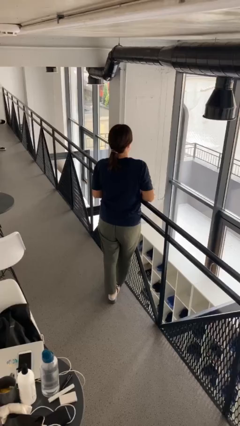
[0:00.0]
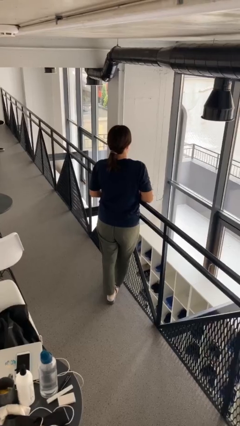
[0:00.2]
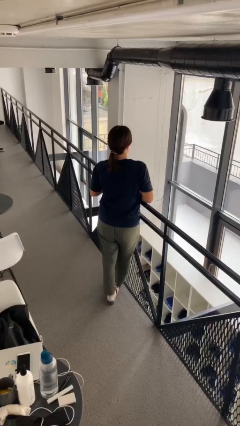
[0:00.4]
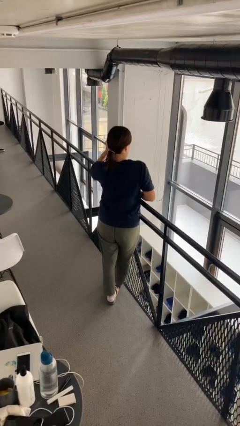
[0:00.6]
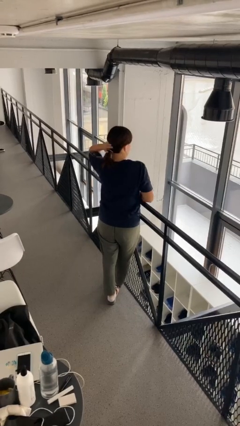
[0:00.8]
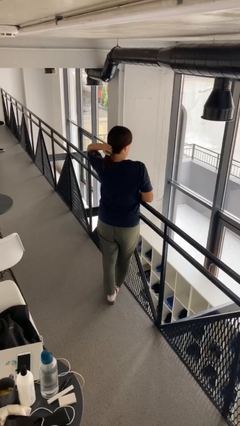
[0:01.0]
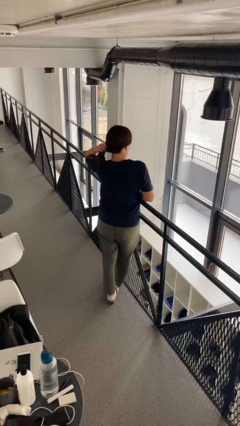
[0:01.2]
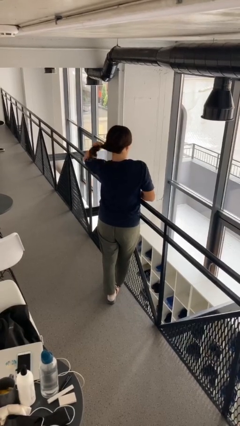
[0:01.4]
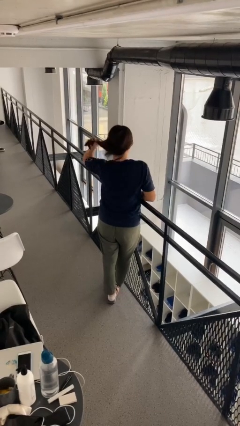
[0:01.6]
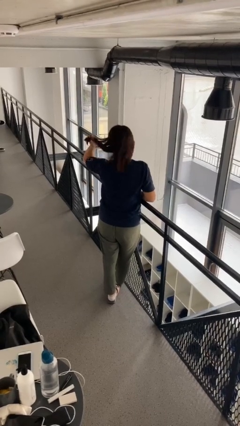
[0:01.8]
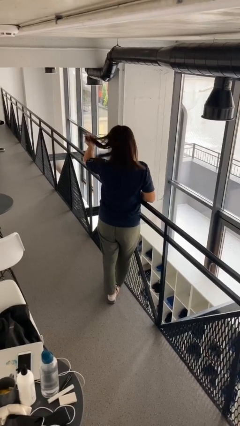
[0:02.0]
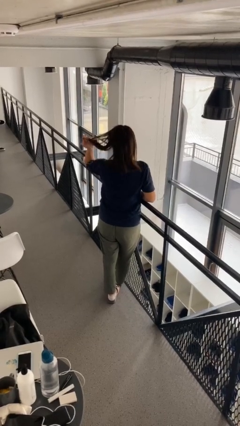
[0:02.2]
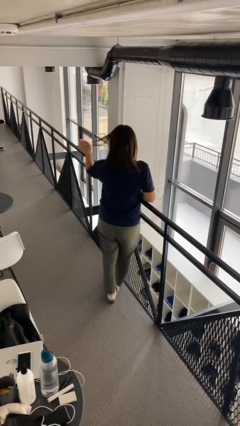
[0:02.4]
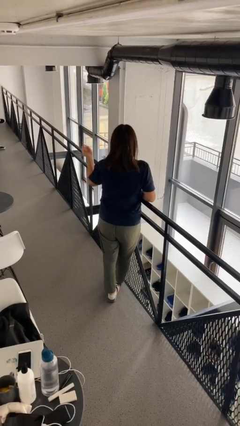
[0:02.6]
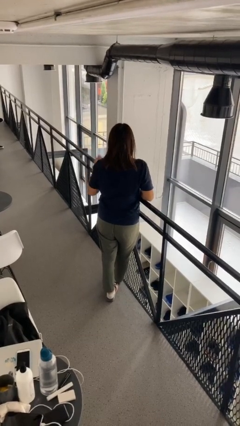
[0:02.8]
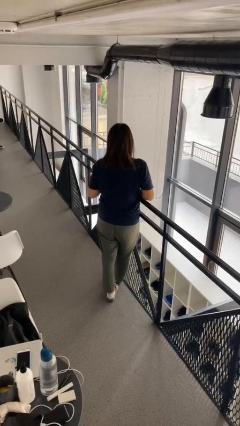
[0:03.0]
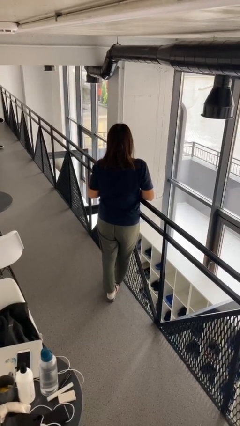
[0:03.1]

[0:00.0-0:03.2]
person takes off hairtie

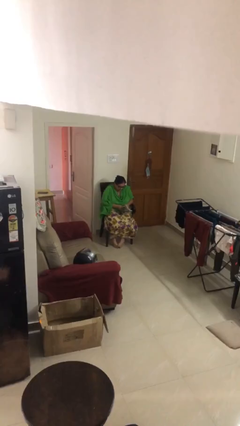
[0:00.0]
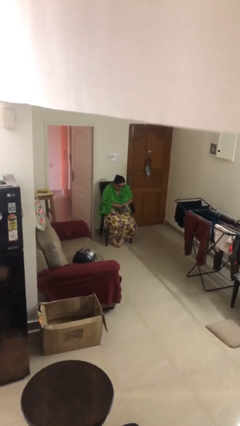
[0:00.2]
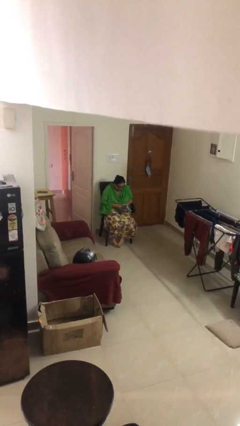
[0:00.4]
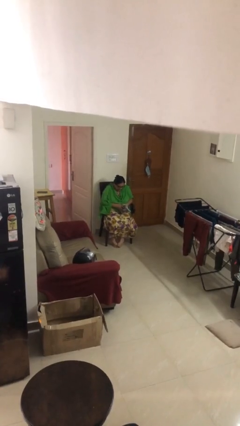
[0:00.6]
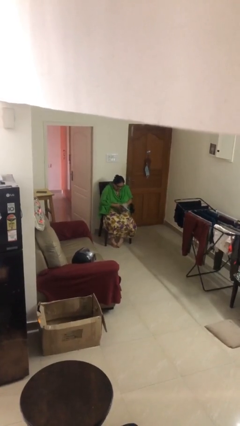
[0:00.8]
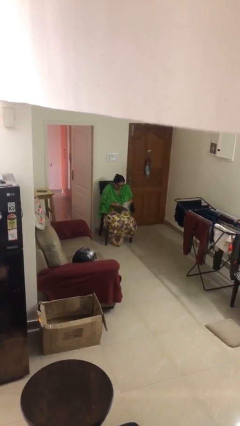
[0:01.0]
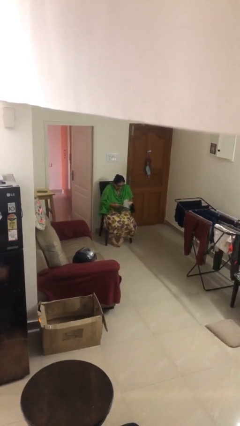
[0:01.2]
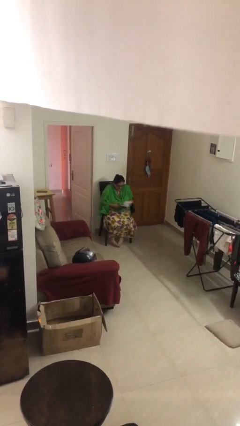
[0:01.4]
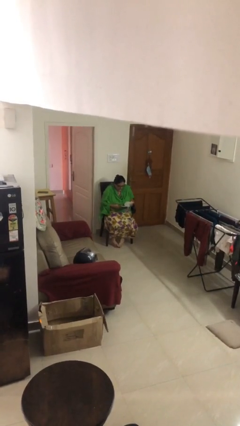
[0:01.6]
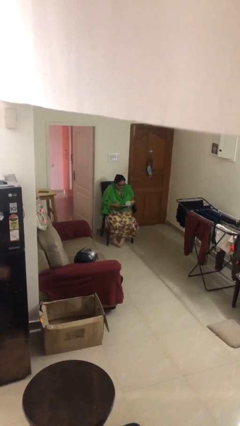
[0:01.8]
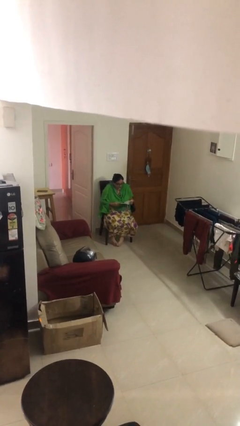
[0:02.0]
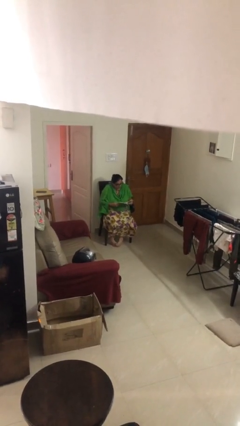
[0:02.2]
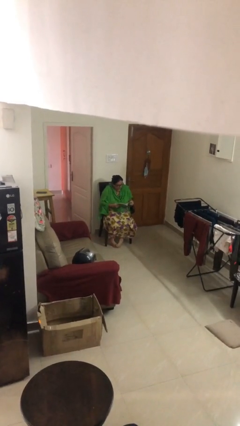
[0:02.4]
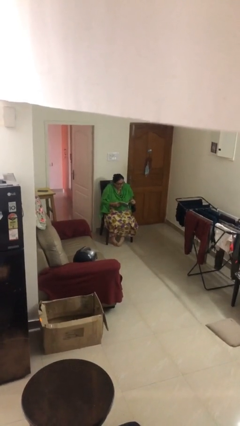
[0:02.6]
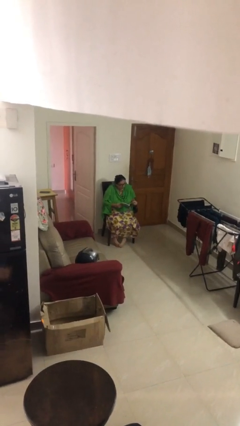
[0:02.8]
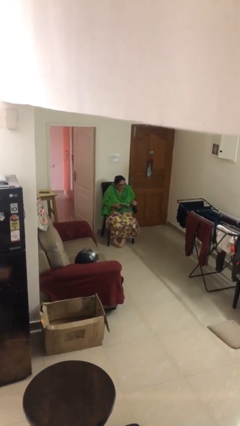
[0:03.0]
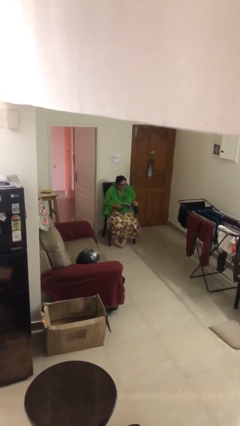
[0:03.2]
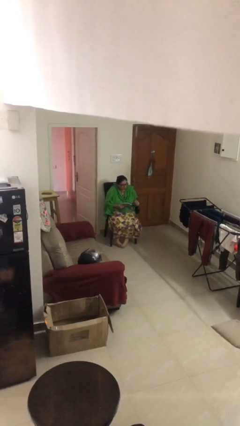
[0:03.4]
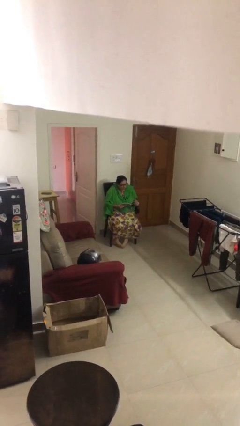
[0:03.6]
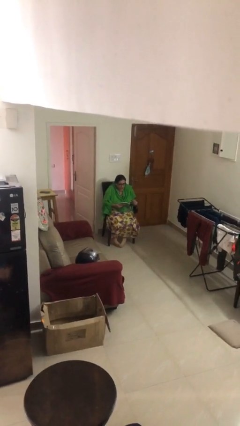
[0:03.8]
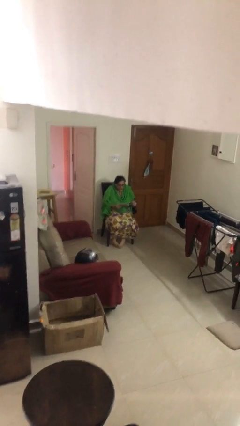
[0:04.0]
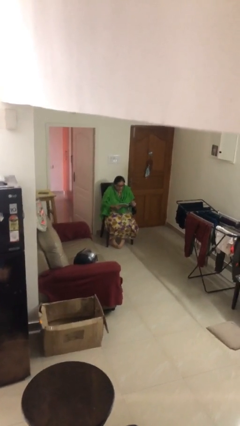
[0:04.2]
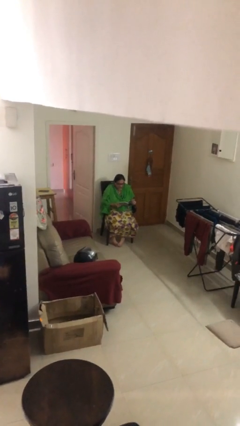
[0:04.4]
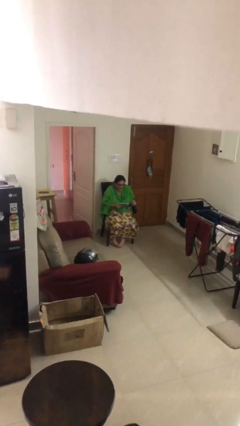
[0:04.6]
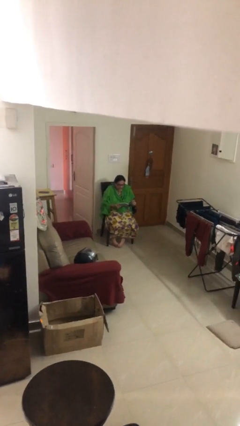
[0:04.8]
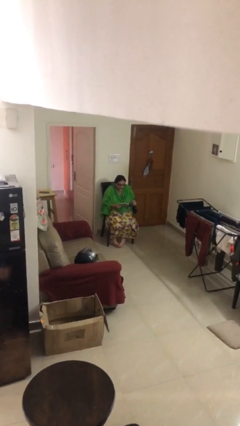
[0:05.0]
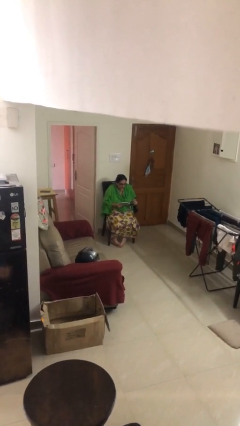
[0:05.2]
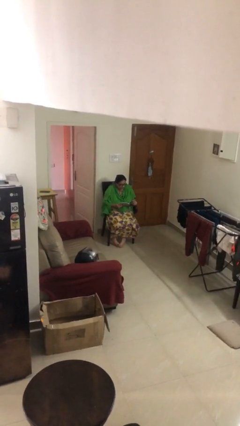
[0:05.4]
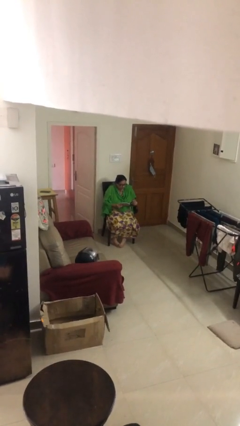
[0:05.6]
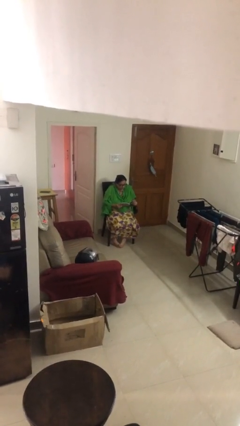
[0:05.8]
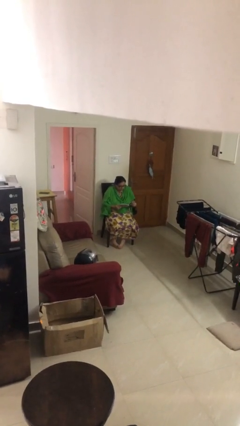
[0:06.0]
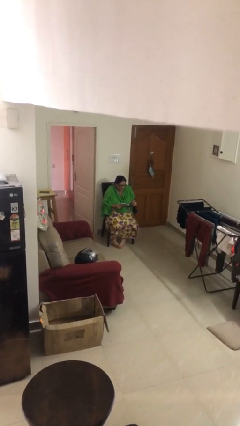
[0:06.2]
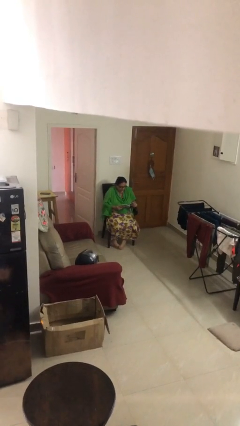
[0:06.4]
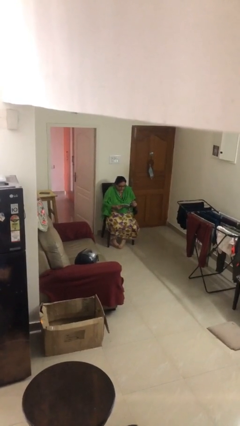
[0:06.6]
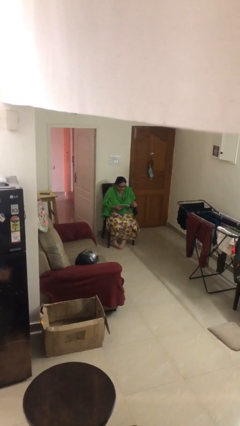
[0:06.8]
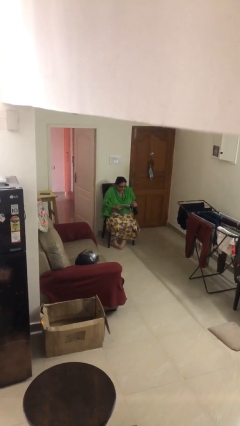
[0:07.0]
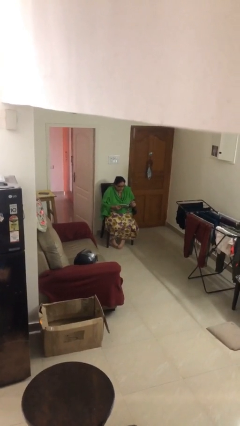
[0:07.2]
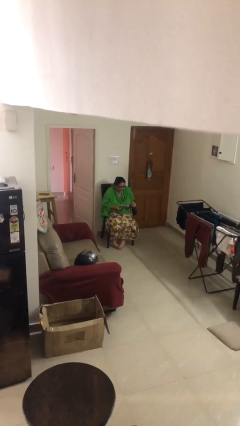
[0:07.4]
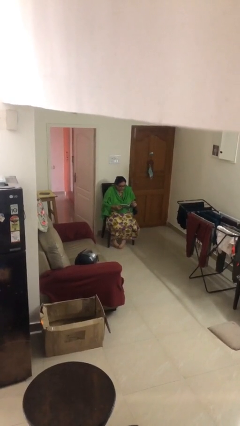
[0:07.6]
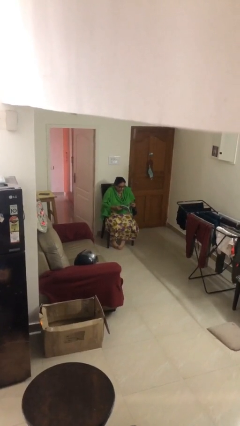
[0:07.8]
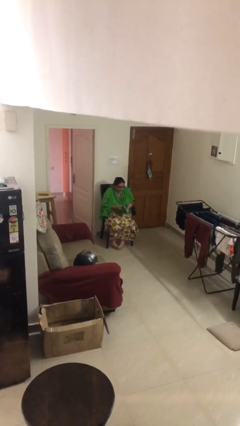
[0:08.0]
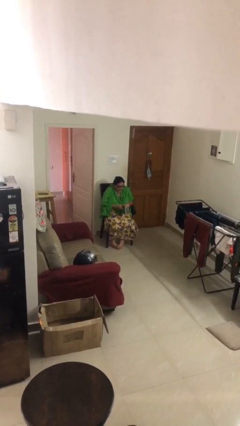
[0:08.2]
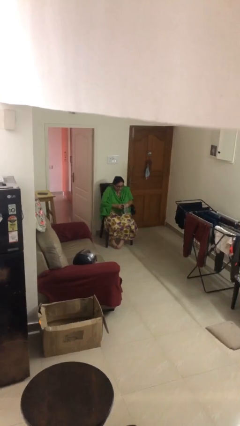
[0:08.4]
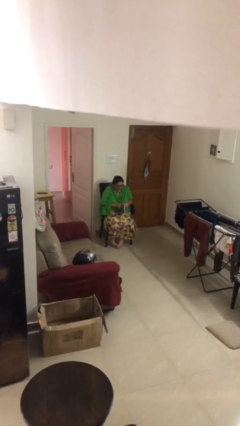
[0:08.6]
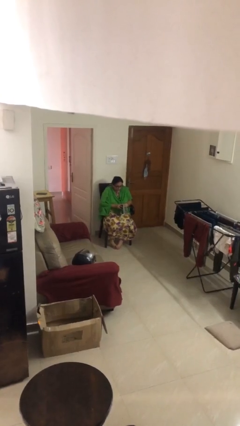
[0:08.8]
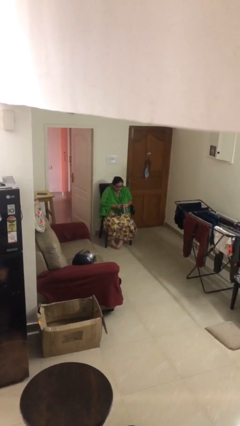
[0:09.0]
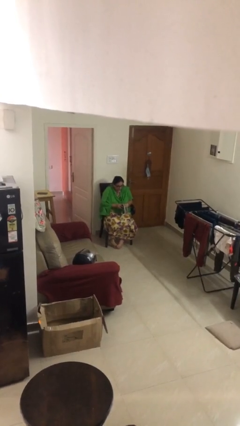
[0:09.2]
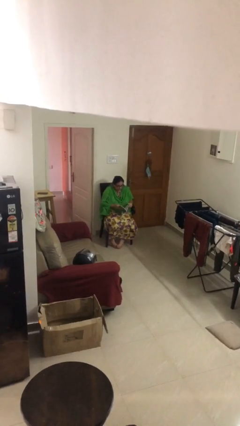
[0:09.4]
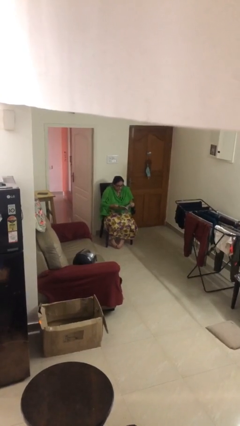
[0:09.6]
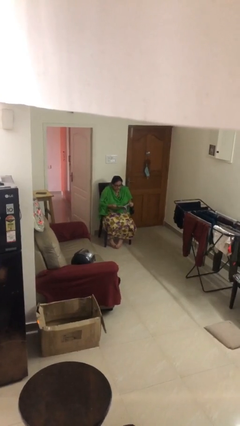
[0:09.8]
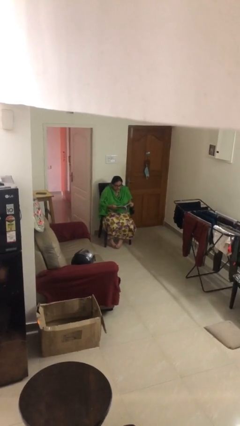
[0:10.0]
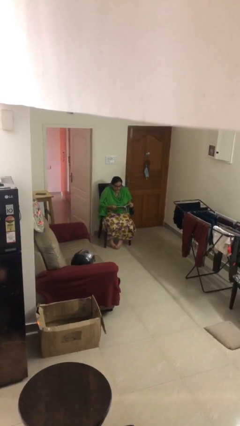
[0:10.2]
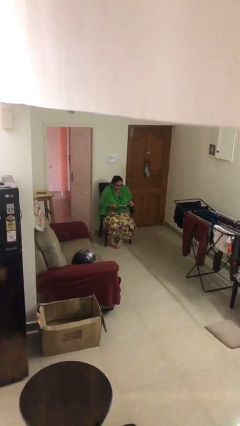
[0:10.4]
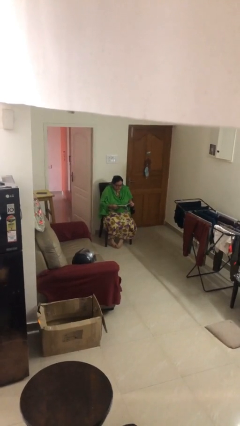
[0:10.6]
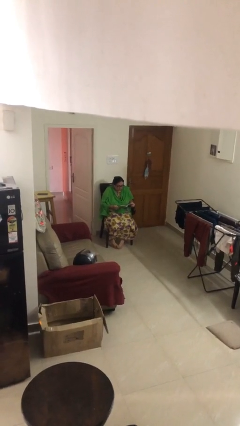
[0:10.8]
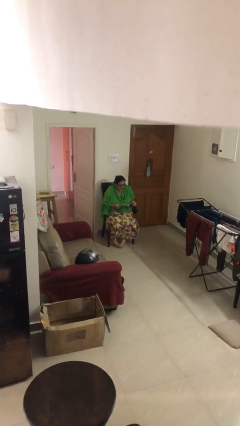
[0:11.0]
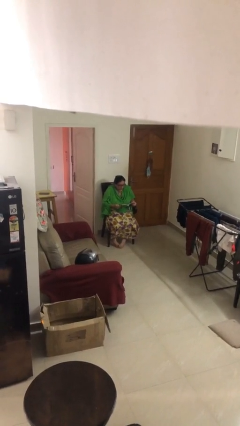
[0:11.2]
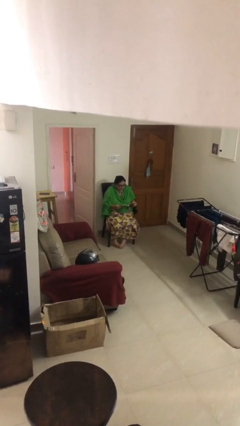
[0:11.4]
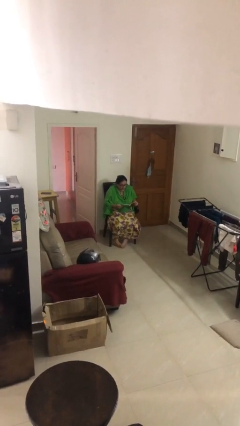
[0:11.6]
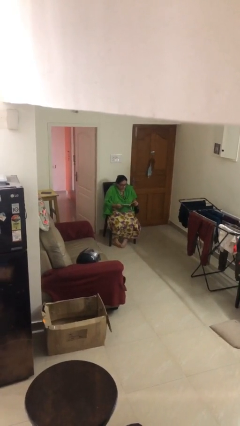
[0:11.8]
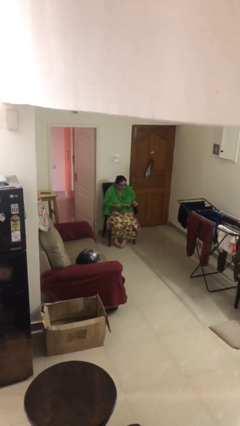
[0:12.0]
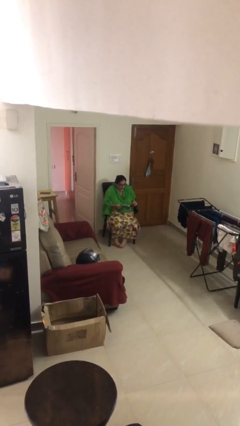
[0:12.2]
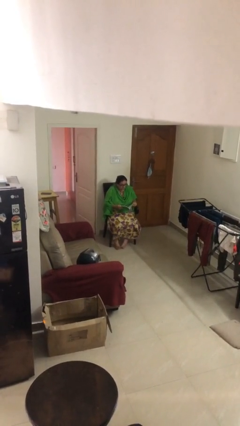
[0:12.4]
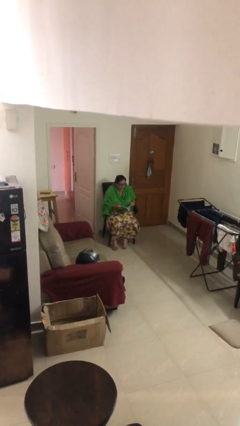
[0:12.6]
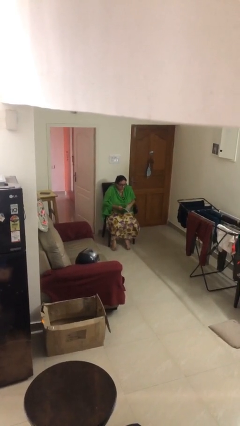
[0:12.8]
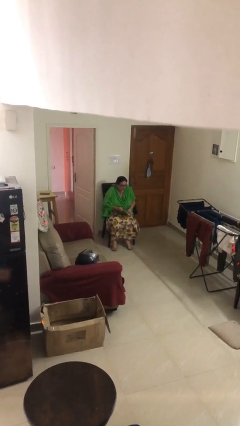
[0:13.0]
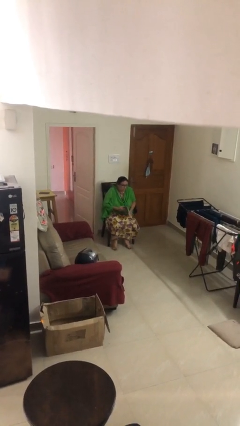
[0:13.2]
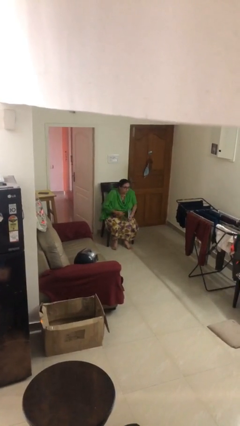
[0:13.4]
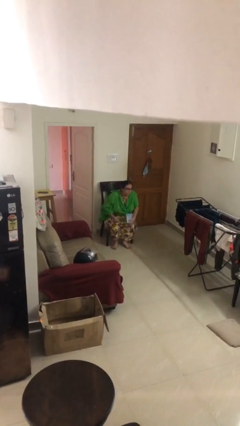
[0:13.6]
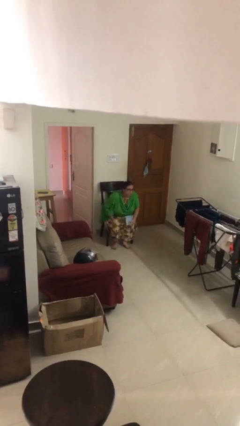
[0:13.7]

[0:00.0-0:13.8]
person reads document

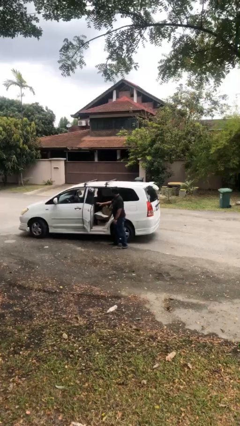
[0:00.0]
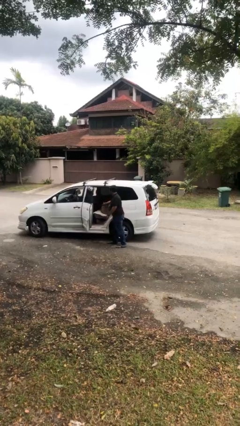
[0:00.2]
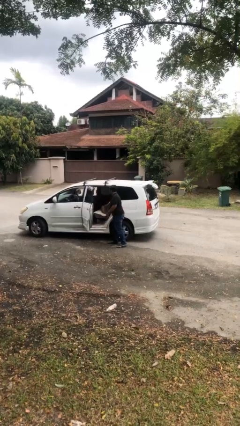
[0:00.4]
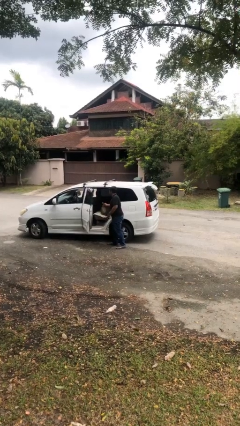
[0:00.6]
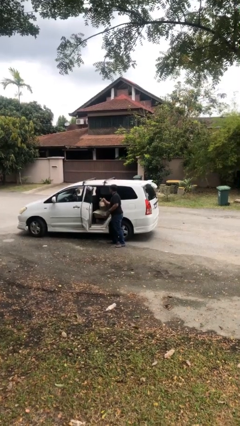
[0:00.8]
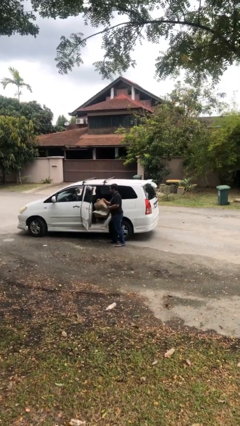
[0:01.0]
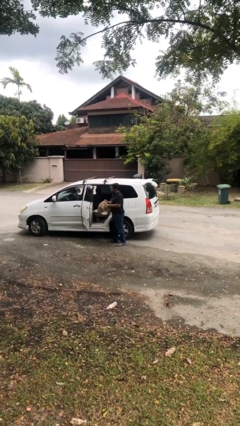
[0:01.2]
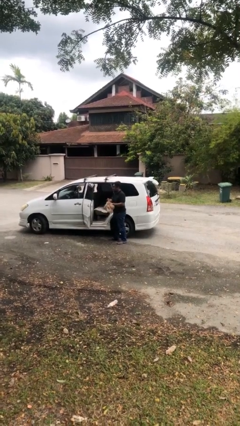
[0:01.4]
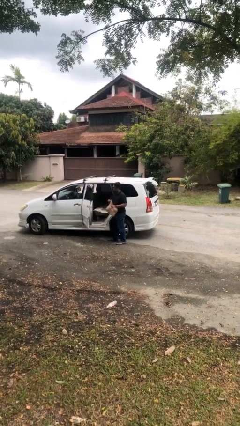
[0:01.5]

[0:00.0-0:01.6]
person unloads car
